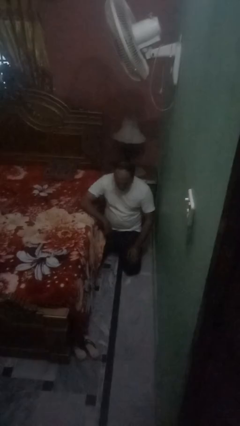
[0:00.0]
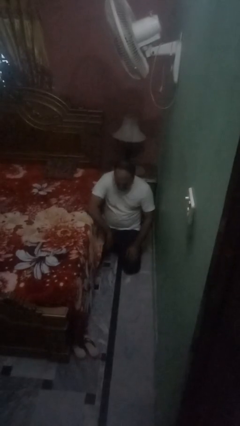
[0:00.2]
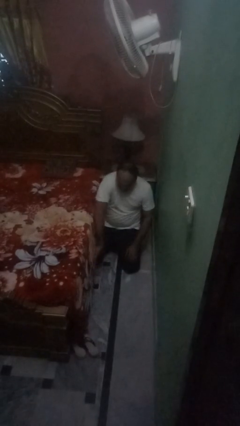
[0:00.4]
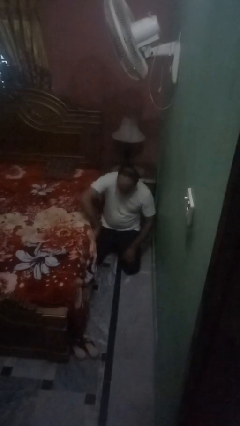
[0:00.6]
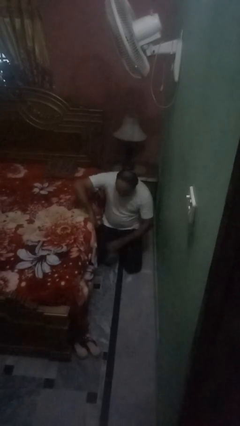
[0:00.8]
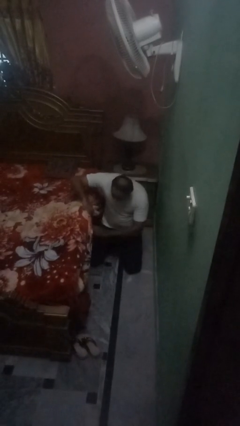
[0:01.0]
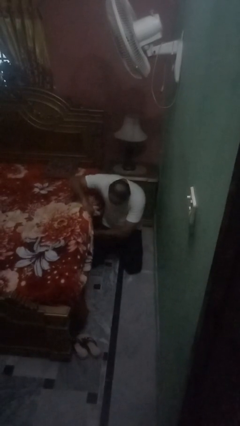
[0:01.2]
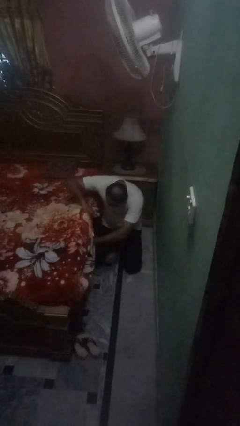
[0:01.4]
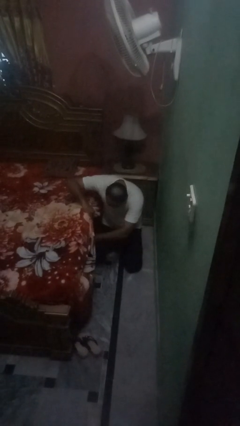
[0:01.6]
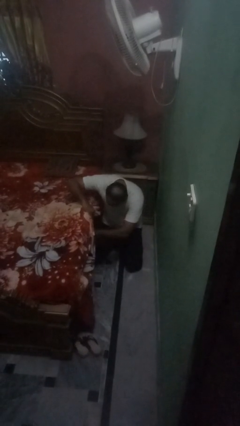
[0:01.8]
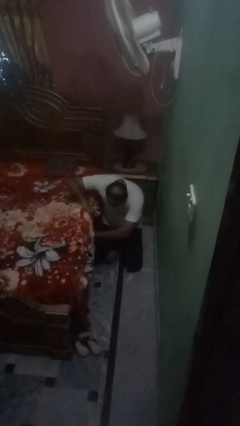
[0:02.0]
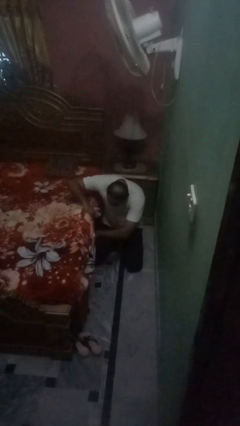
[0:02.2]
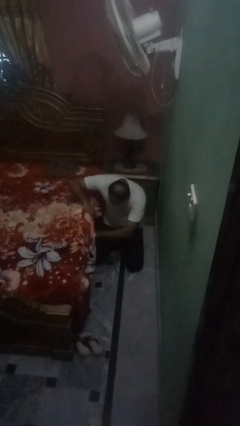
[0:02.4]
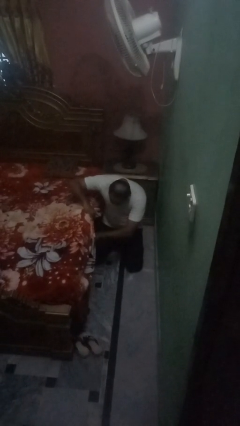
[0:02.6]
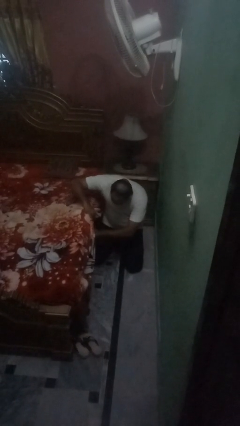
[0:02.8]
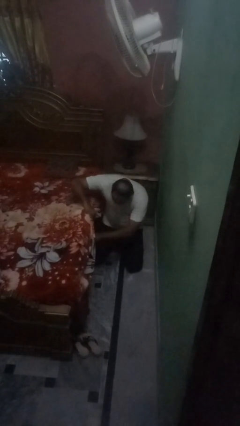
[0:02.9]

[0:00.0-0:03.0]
person searches under bed

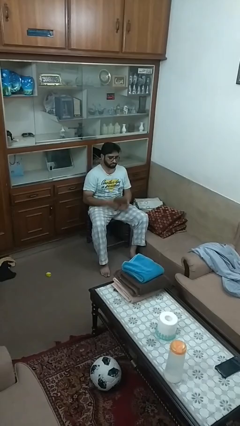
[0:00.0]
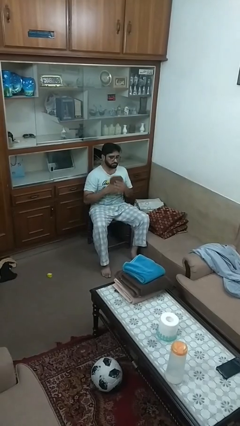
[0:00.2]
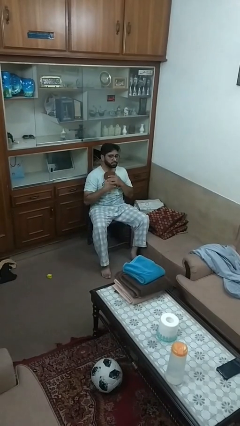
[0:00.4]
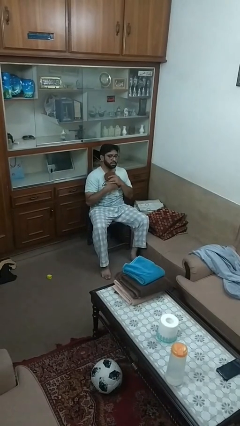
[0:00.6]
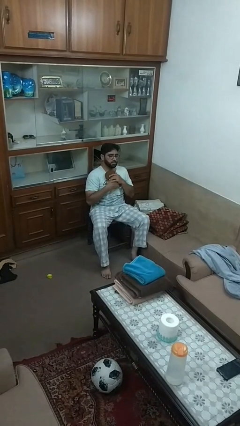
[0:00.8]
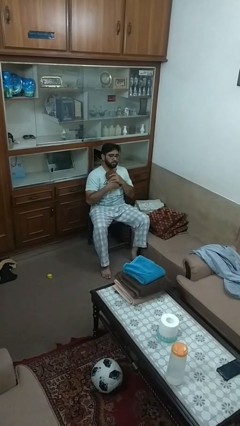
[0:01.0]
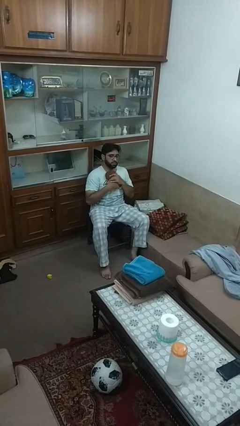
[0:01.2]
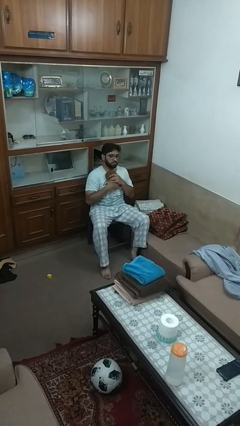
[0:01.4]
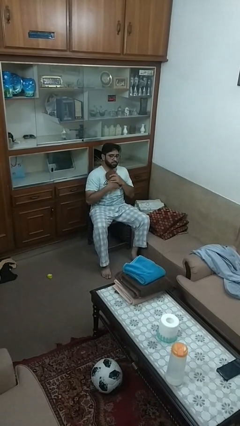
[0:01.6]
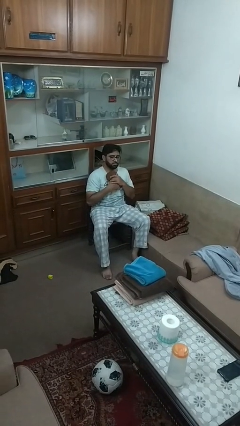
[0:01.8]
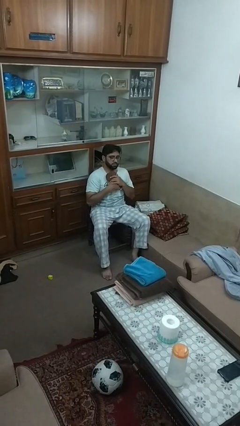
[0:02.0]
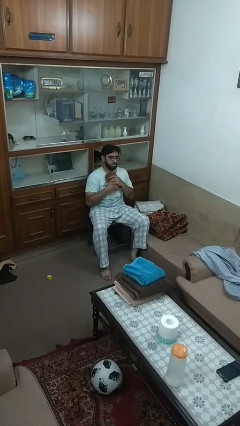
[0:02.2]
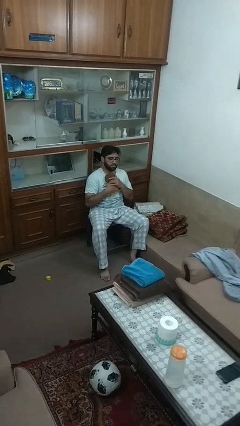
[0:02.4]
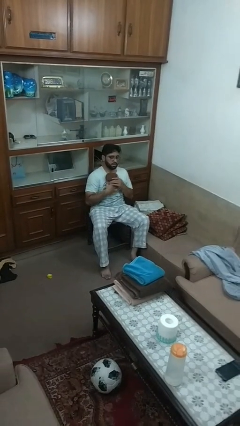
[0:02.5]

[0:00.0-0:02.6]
person hugs stuffed animal

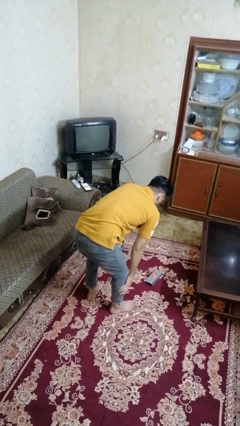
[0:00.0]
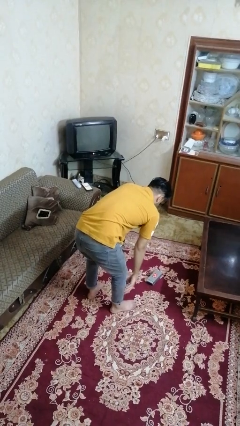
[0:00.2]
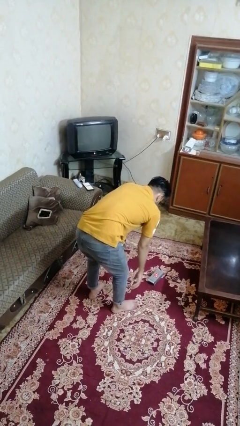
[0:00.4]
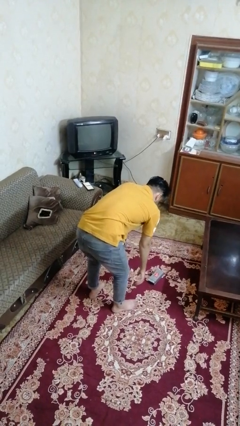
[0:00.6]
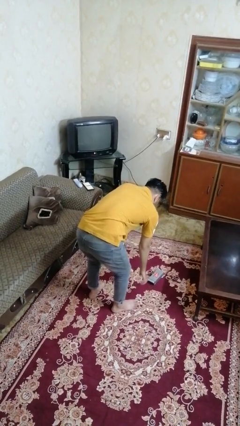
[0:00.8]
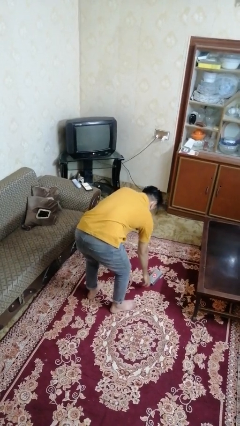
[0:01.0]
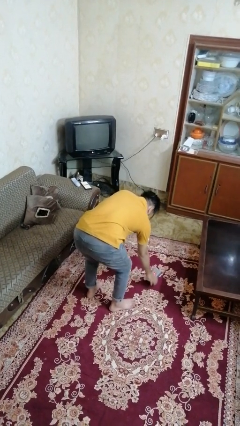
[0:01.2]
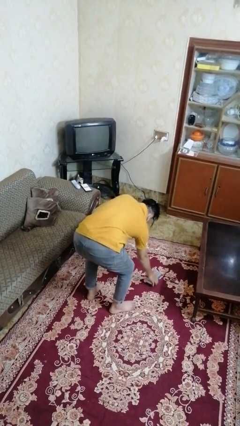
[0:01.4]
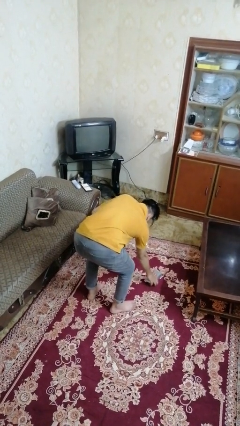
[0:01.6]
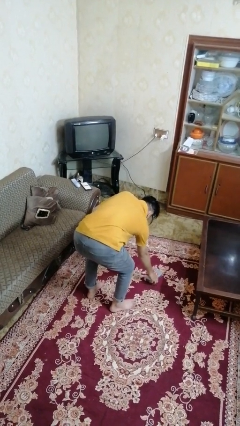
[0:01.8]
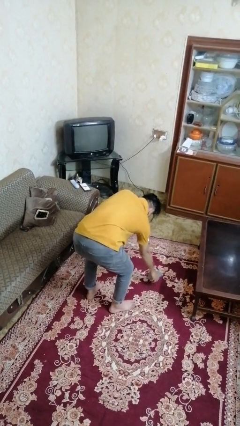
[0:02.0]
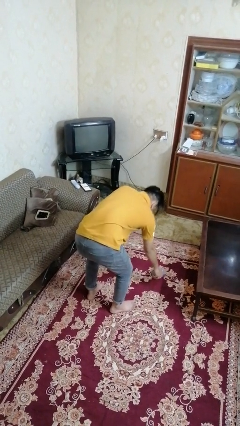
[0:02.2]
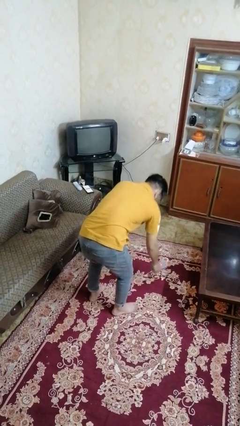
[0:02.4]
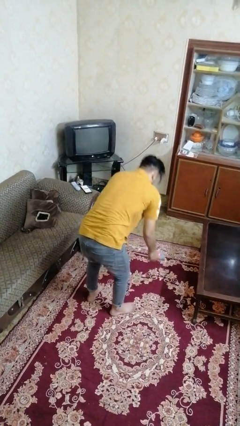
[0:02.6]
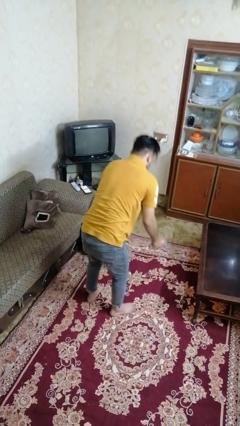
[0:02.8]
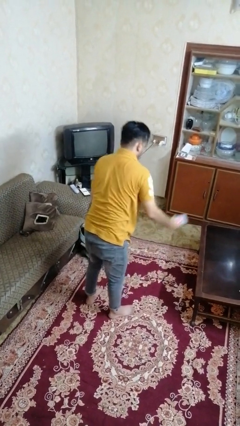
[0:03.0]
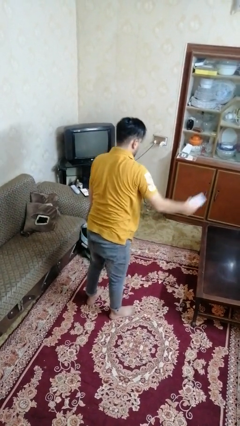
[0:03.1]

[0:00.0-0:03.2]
person picks up object from floor

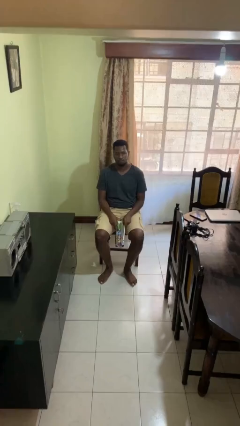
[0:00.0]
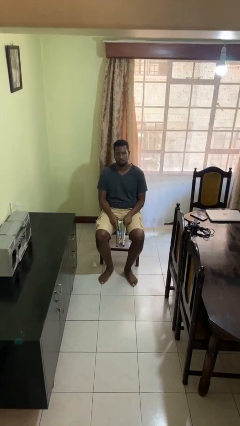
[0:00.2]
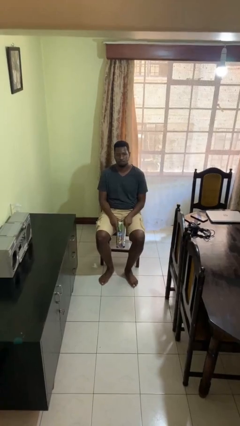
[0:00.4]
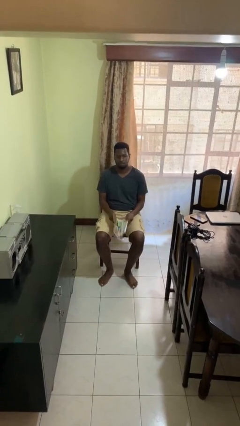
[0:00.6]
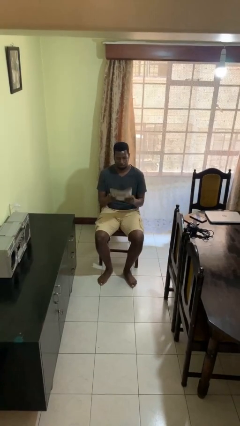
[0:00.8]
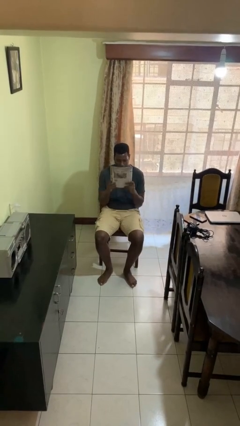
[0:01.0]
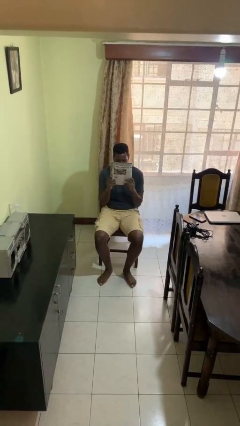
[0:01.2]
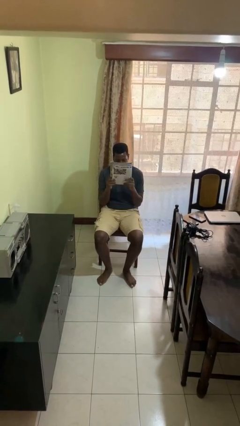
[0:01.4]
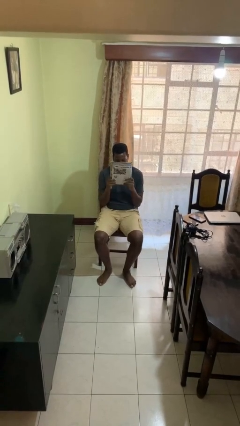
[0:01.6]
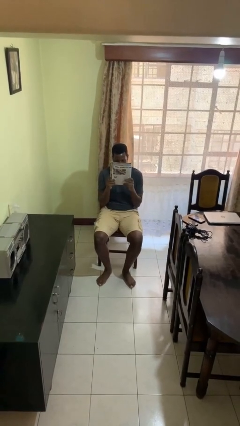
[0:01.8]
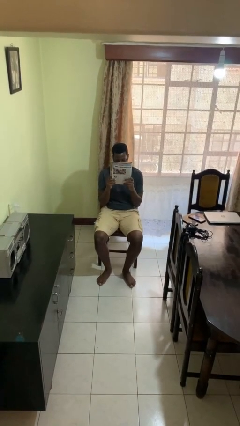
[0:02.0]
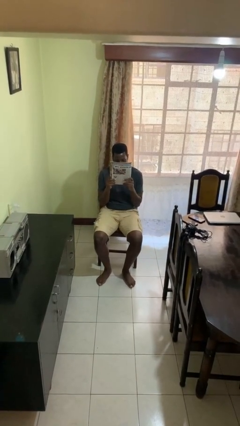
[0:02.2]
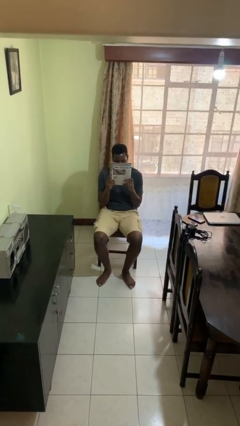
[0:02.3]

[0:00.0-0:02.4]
person reads document

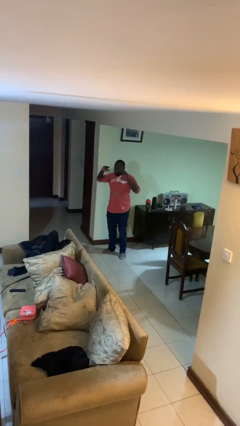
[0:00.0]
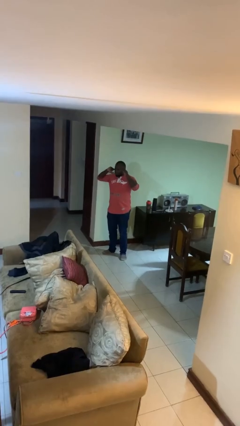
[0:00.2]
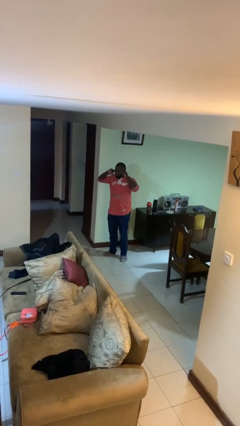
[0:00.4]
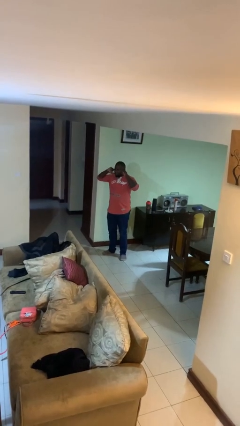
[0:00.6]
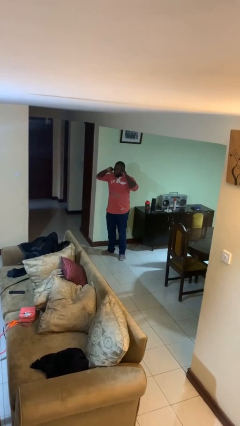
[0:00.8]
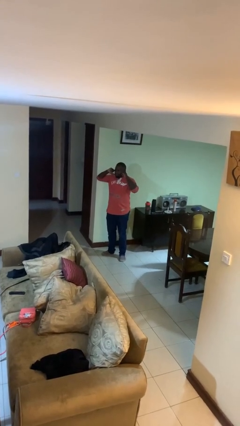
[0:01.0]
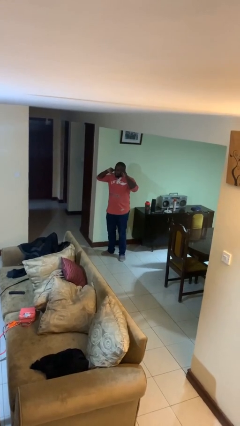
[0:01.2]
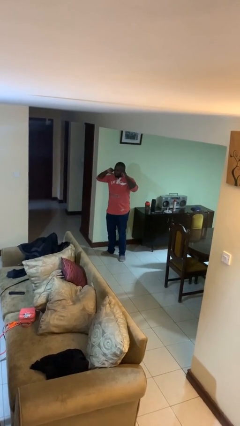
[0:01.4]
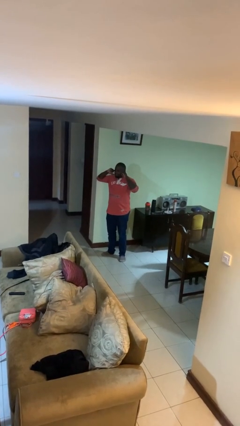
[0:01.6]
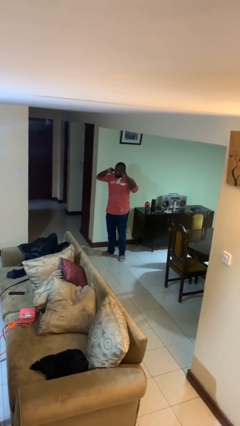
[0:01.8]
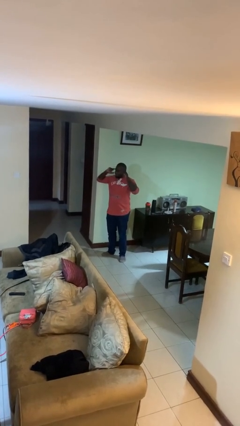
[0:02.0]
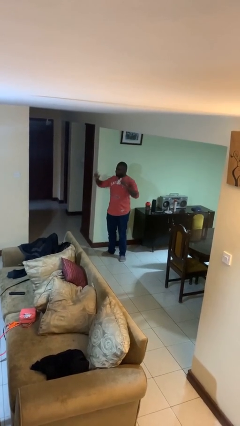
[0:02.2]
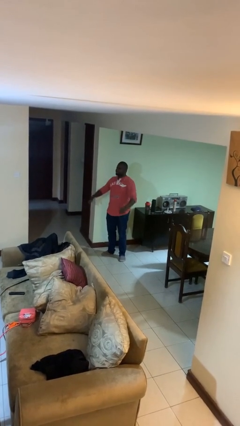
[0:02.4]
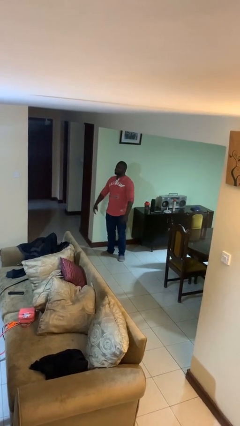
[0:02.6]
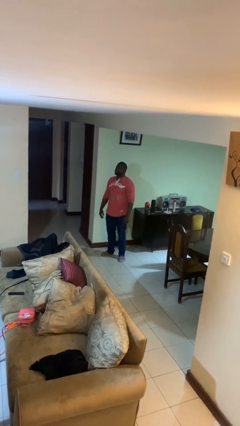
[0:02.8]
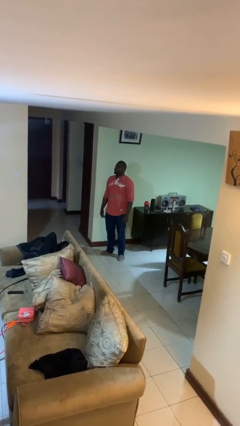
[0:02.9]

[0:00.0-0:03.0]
person puts fingers in ear

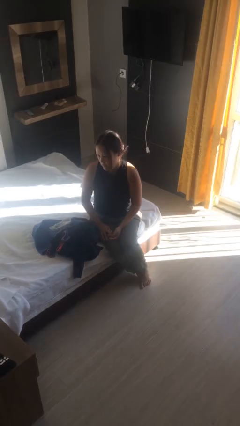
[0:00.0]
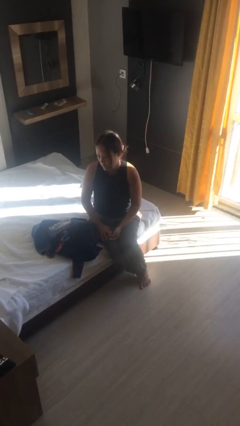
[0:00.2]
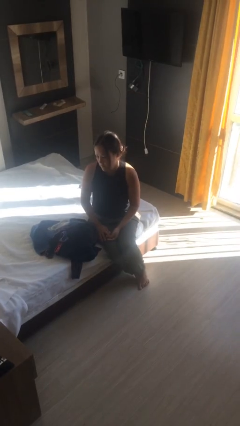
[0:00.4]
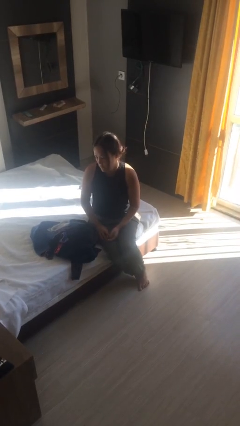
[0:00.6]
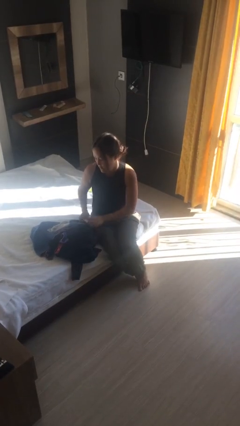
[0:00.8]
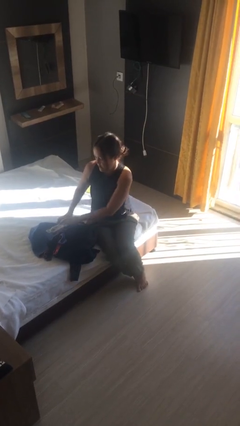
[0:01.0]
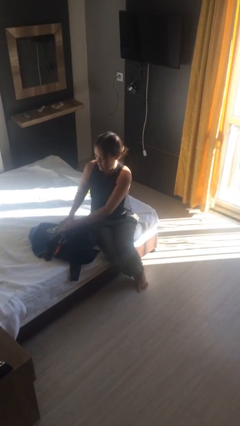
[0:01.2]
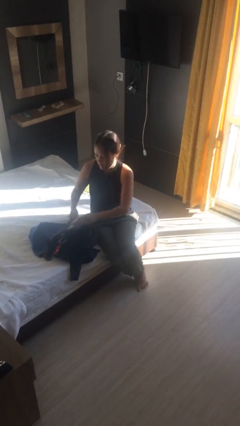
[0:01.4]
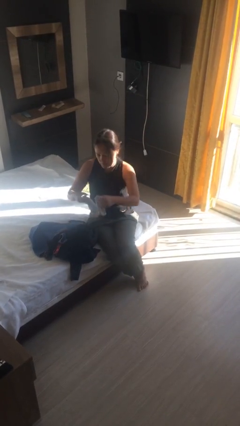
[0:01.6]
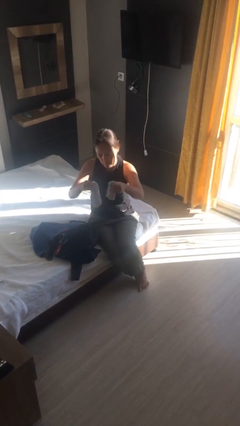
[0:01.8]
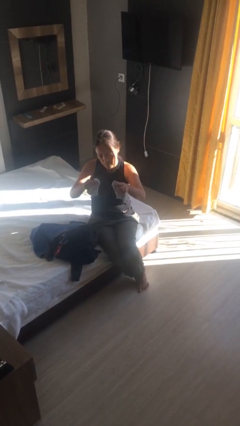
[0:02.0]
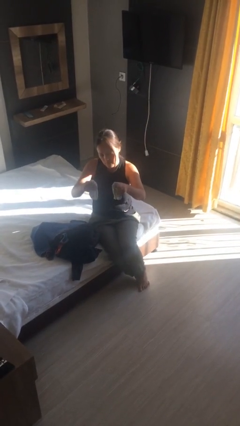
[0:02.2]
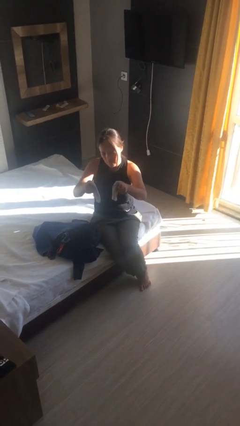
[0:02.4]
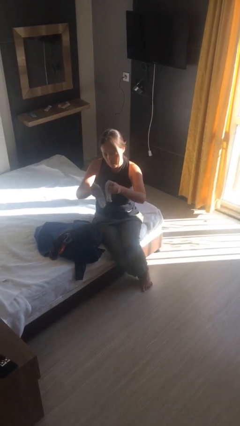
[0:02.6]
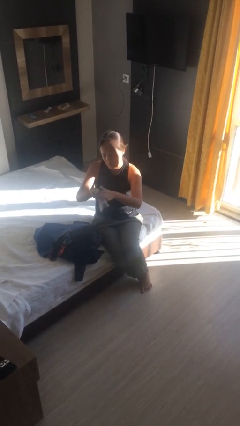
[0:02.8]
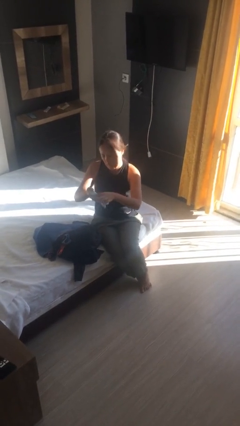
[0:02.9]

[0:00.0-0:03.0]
person folds shirt

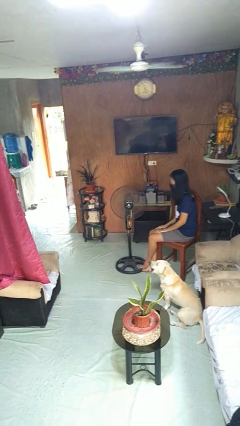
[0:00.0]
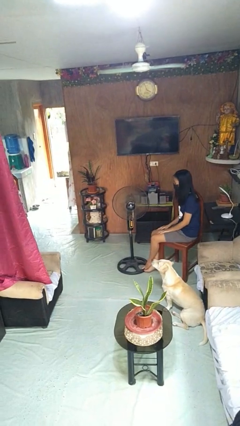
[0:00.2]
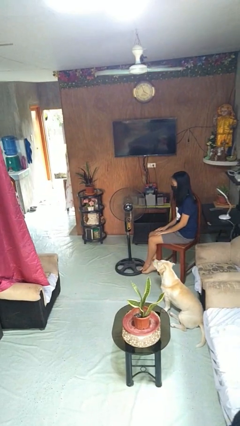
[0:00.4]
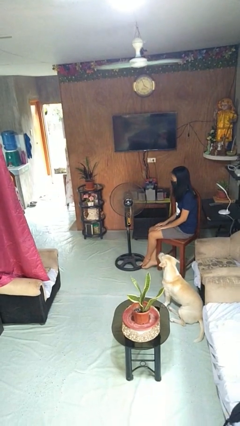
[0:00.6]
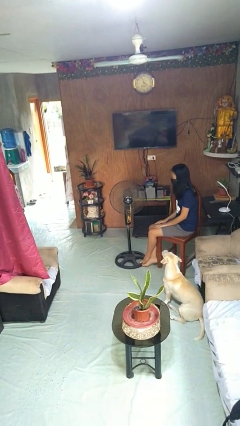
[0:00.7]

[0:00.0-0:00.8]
person turns on fan
